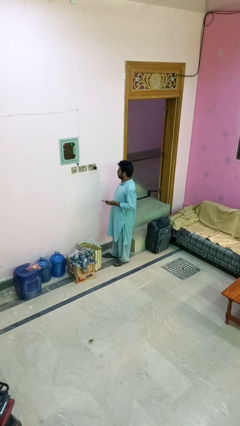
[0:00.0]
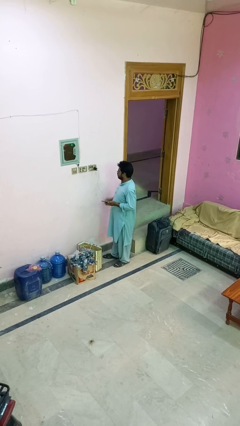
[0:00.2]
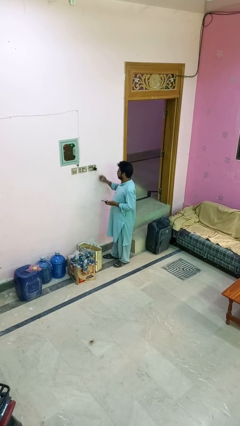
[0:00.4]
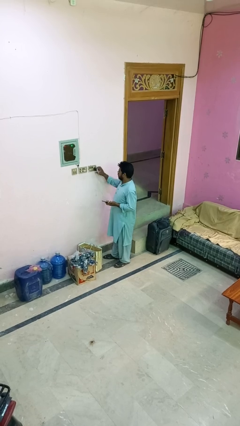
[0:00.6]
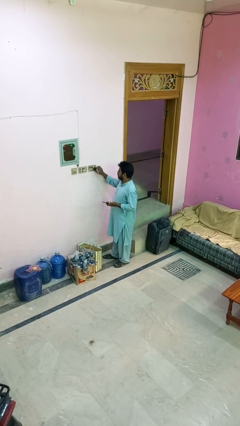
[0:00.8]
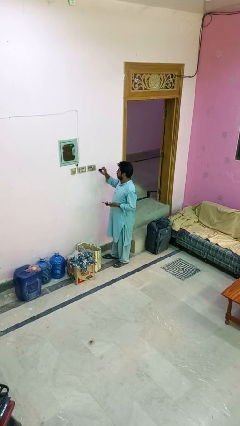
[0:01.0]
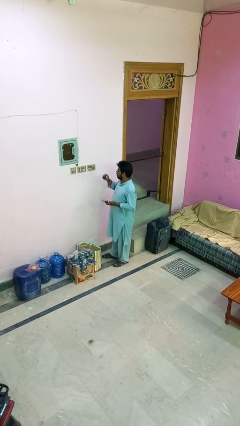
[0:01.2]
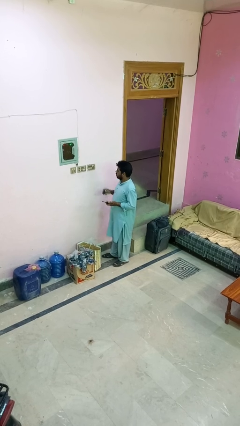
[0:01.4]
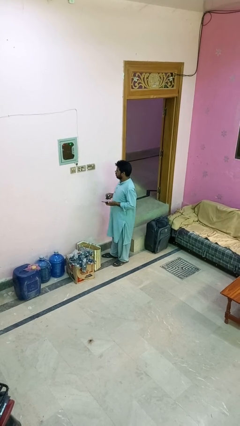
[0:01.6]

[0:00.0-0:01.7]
person unplugs from electrical socket

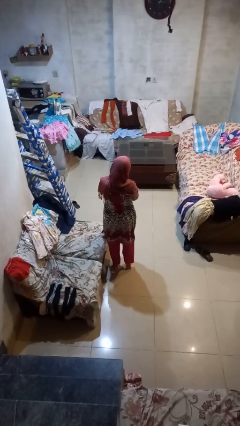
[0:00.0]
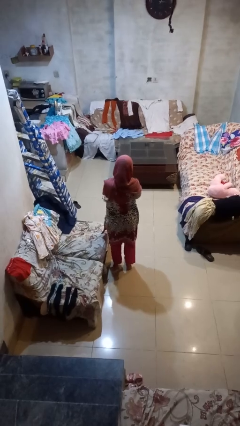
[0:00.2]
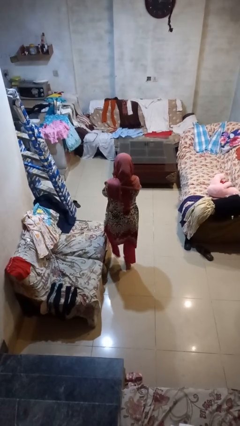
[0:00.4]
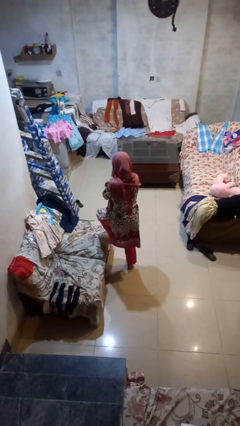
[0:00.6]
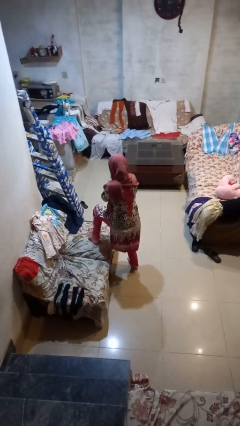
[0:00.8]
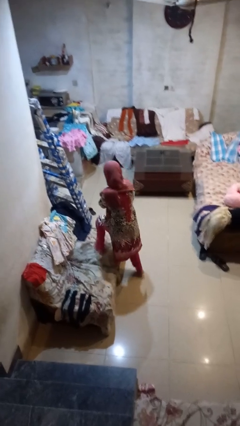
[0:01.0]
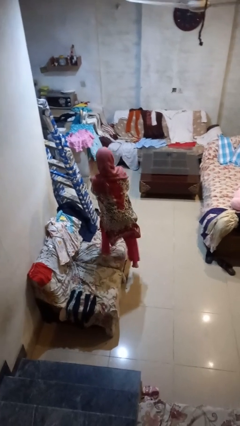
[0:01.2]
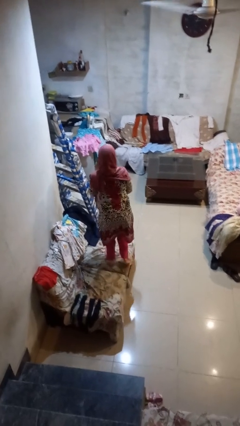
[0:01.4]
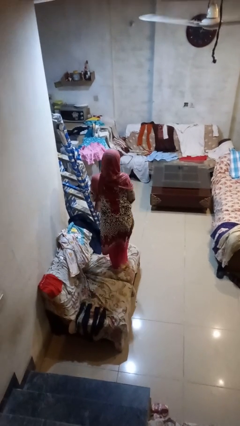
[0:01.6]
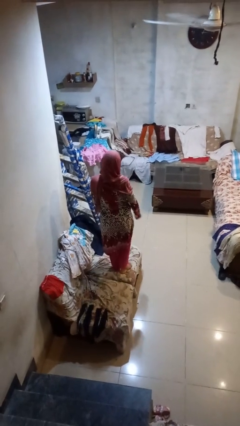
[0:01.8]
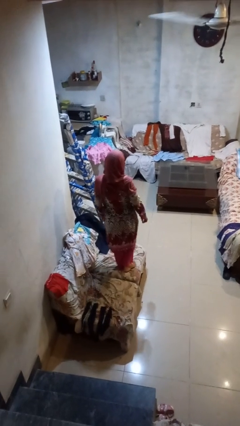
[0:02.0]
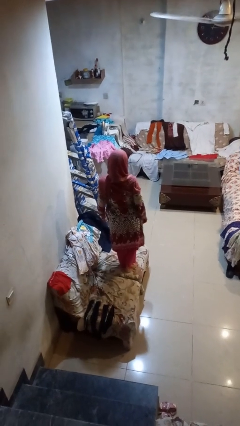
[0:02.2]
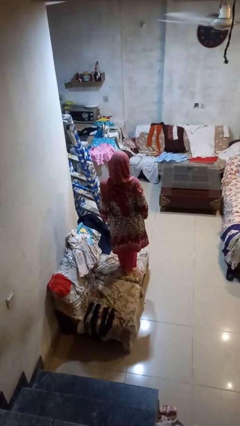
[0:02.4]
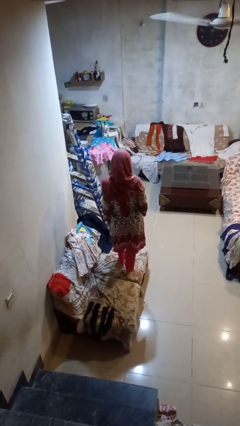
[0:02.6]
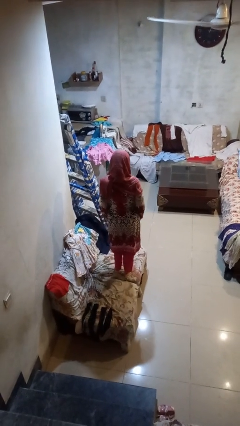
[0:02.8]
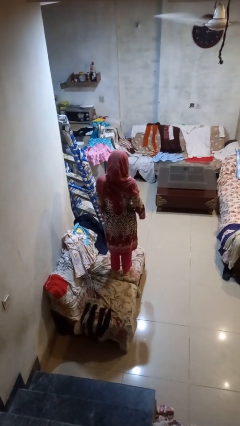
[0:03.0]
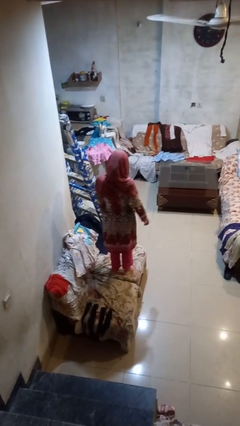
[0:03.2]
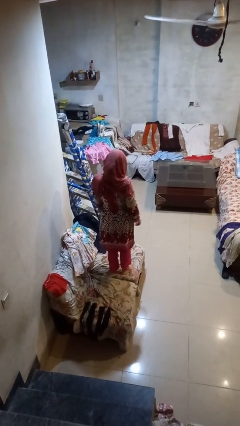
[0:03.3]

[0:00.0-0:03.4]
person climbs on couch

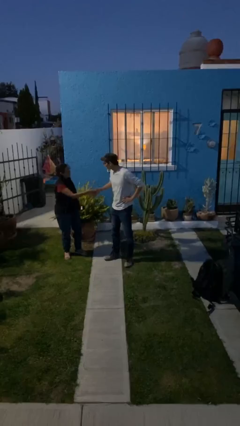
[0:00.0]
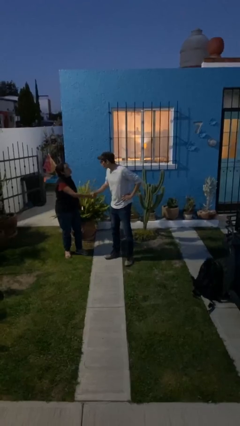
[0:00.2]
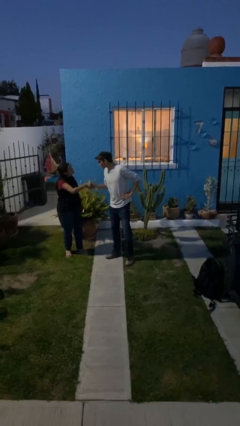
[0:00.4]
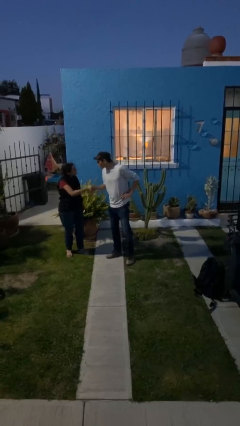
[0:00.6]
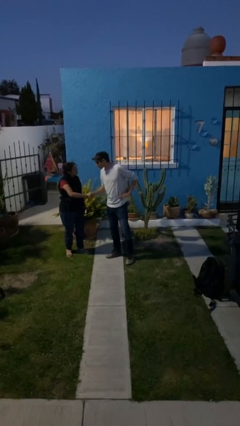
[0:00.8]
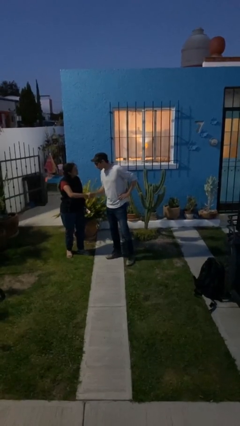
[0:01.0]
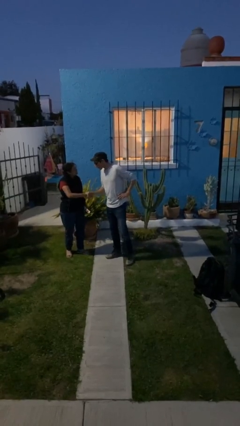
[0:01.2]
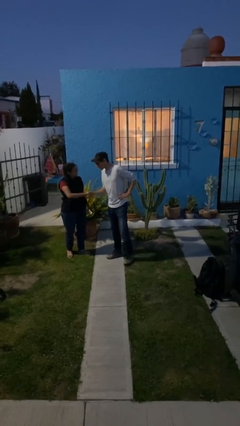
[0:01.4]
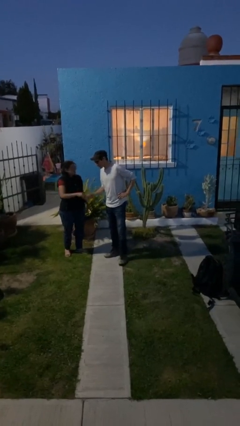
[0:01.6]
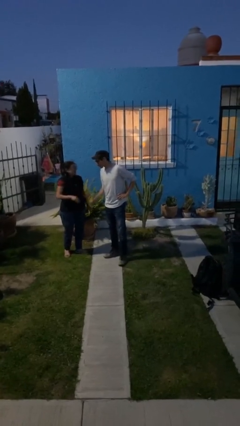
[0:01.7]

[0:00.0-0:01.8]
person shakes hand

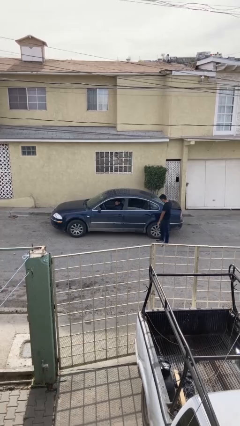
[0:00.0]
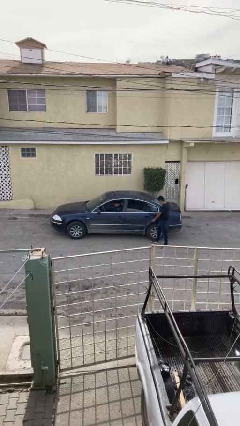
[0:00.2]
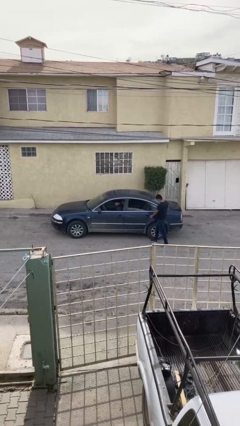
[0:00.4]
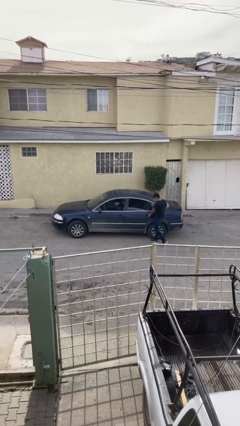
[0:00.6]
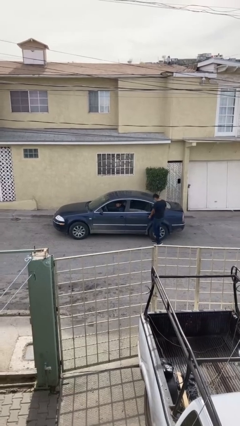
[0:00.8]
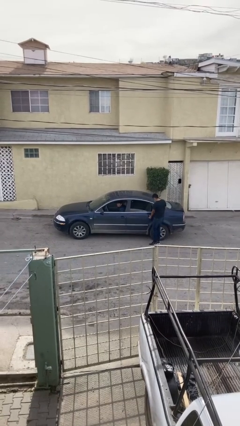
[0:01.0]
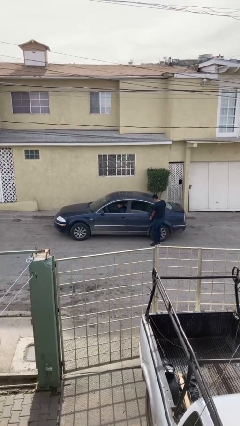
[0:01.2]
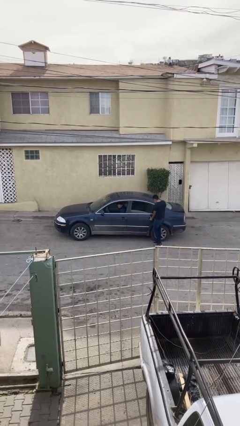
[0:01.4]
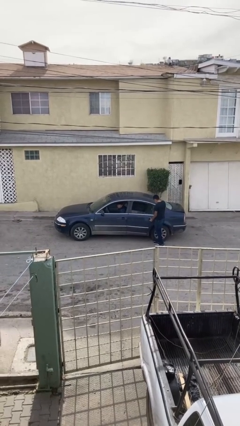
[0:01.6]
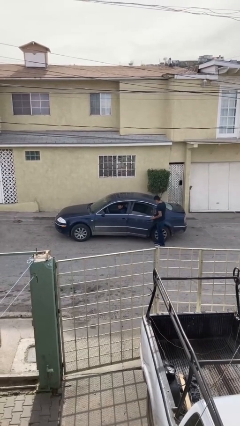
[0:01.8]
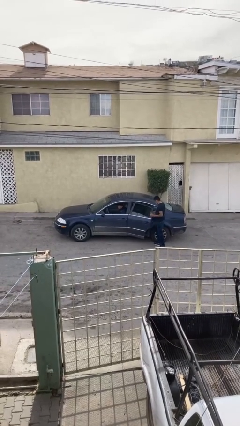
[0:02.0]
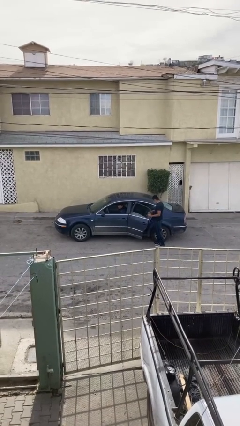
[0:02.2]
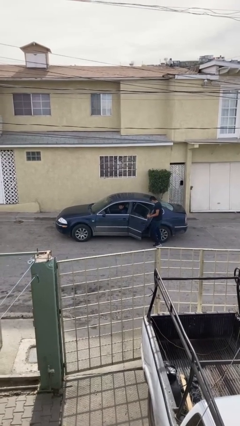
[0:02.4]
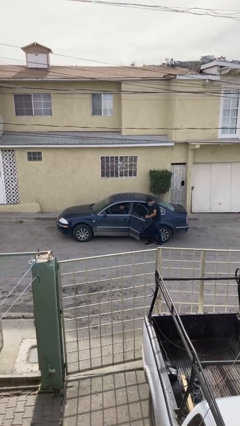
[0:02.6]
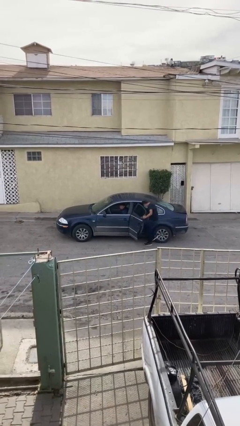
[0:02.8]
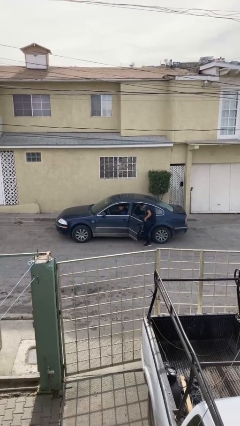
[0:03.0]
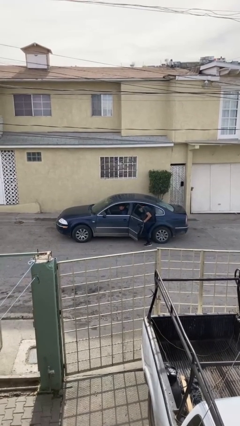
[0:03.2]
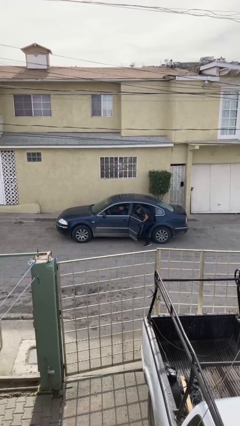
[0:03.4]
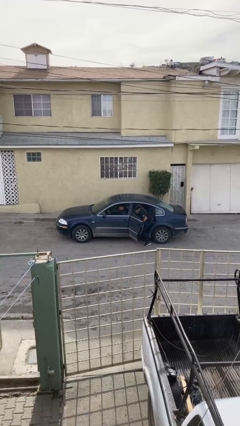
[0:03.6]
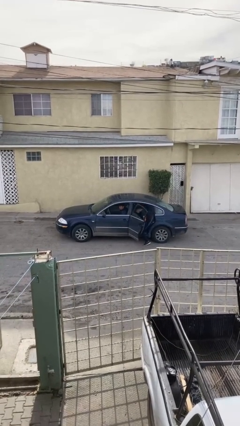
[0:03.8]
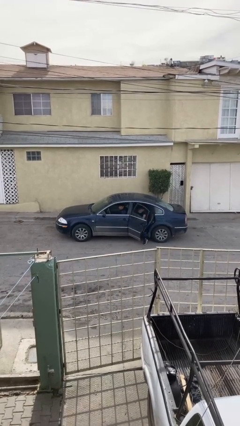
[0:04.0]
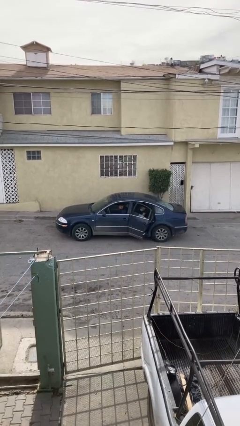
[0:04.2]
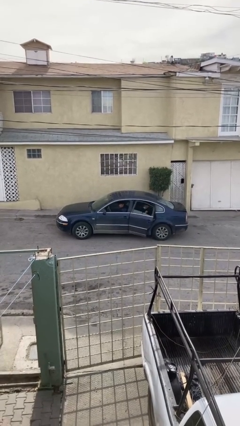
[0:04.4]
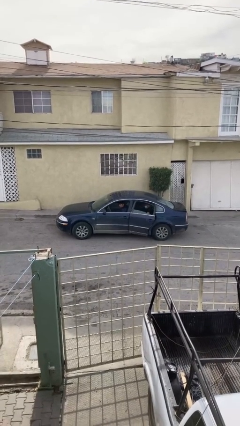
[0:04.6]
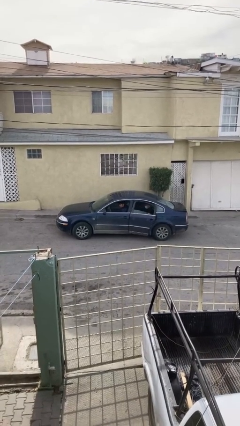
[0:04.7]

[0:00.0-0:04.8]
car picks up person

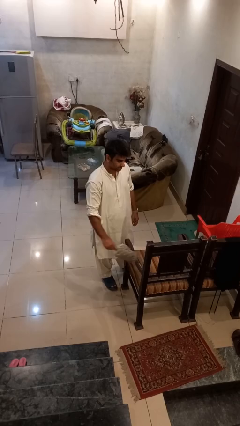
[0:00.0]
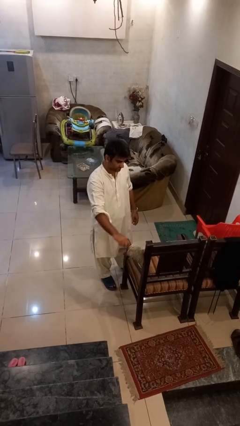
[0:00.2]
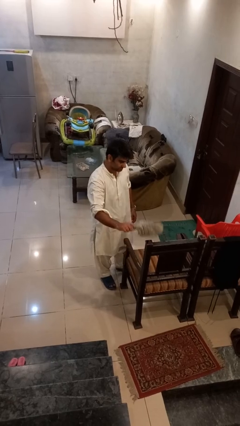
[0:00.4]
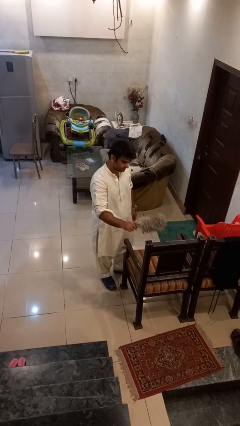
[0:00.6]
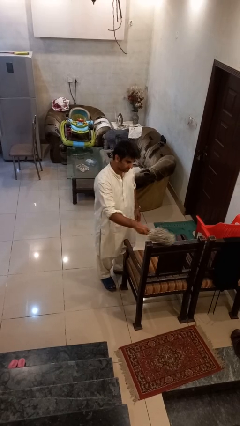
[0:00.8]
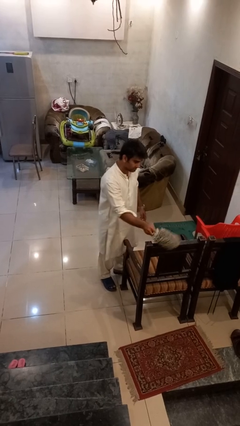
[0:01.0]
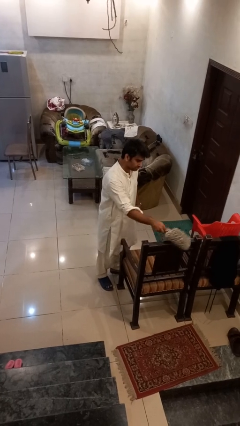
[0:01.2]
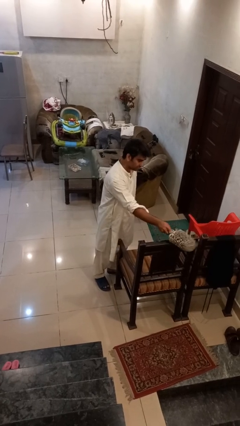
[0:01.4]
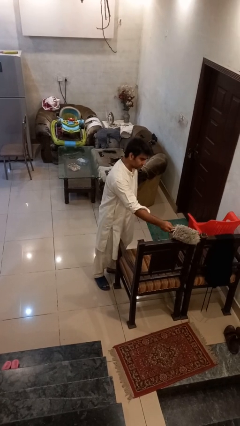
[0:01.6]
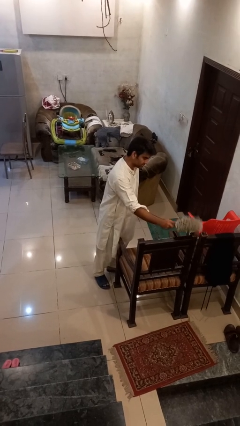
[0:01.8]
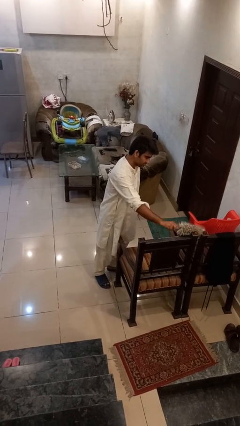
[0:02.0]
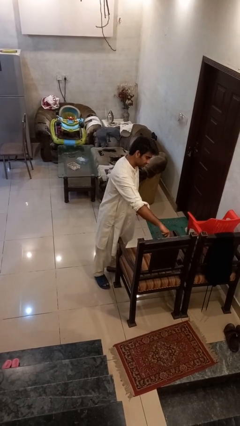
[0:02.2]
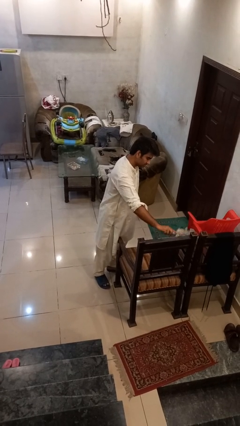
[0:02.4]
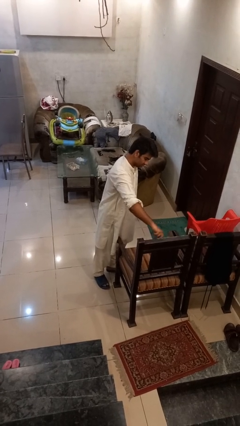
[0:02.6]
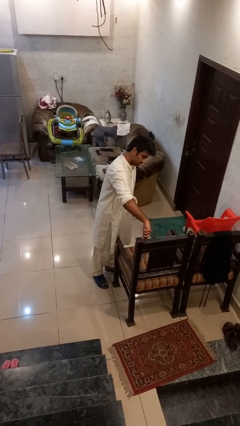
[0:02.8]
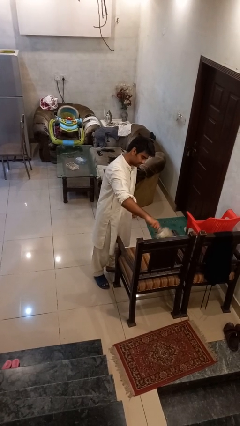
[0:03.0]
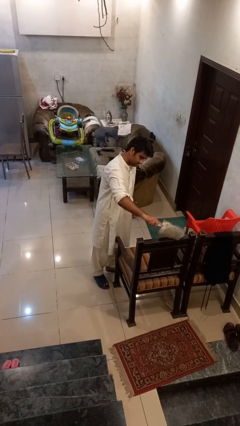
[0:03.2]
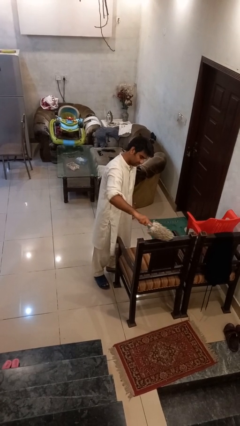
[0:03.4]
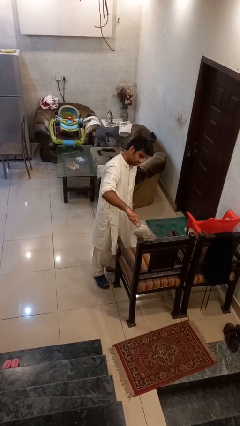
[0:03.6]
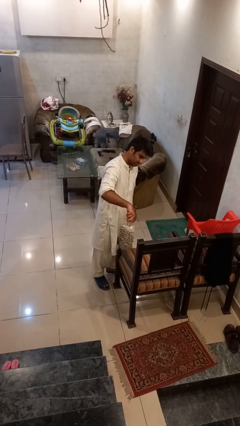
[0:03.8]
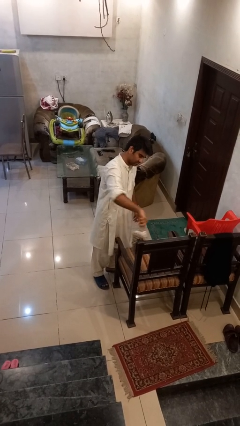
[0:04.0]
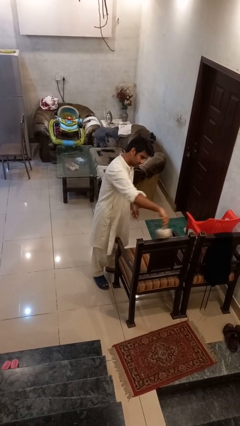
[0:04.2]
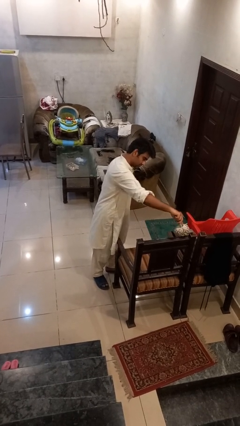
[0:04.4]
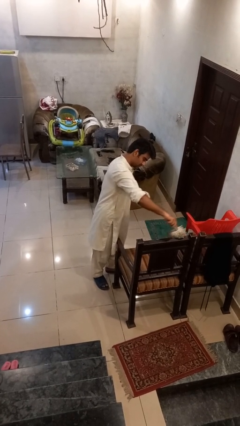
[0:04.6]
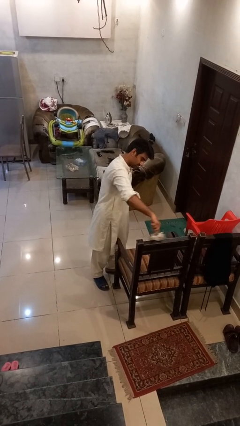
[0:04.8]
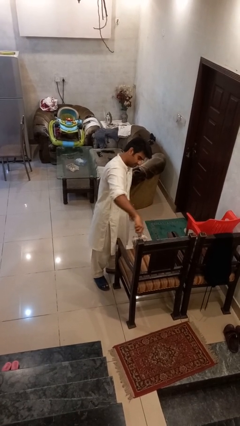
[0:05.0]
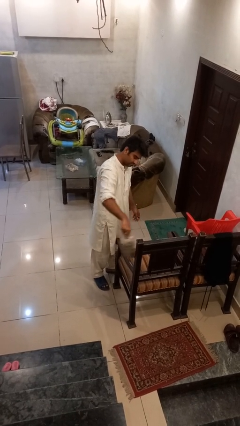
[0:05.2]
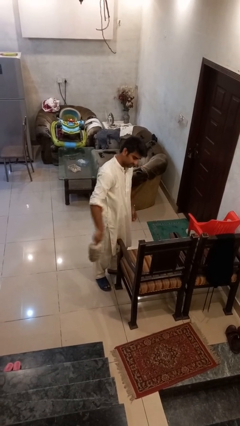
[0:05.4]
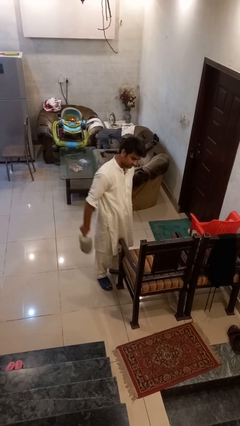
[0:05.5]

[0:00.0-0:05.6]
person dusts furniture
